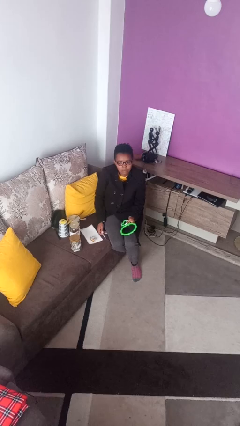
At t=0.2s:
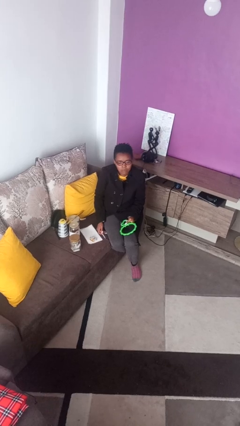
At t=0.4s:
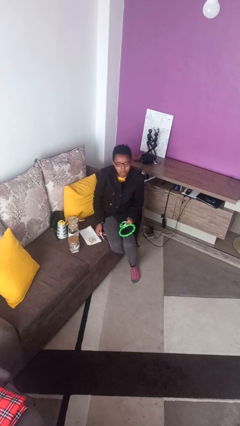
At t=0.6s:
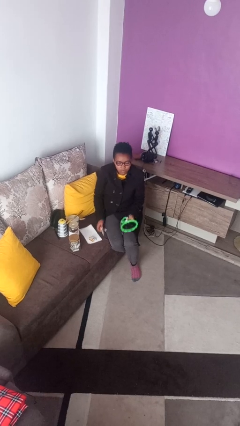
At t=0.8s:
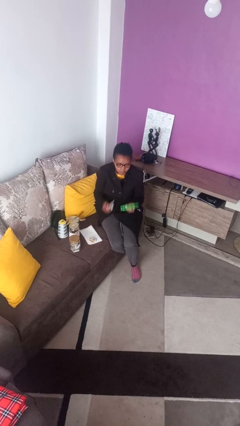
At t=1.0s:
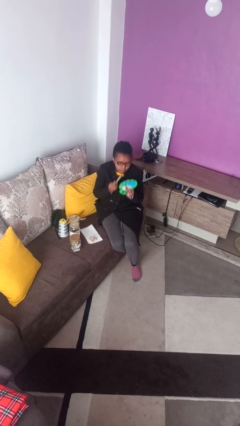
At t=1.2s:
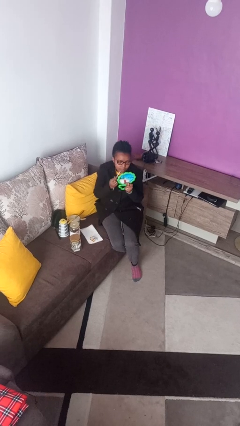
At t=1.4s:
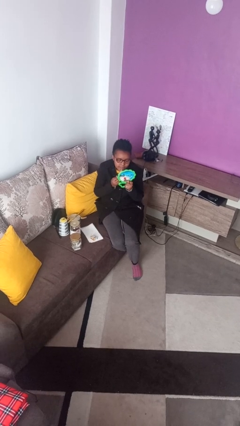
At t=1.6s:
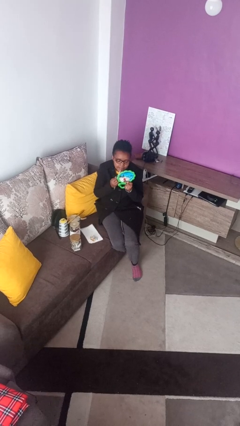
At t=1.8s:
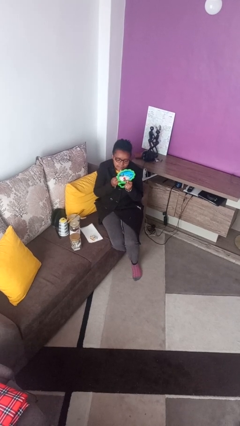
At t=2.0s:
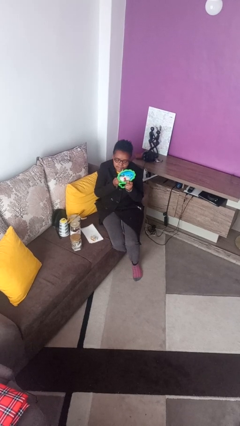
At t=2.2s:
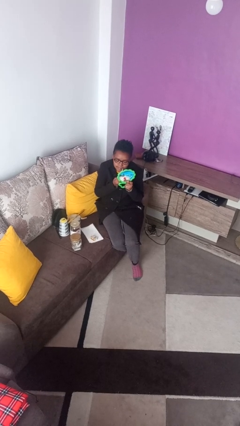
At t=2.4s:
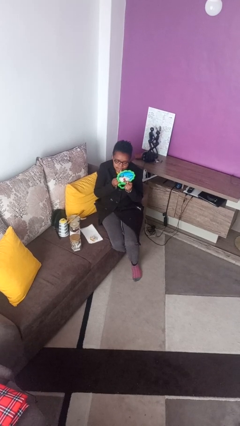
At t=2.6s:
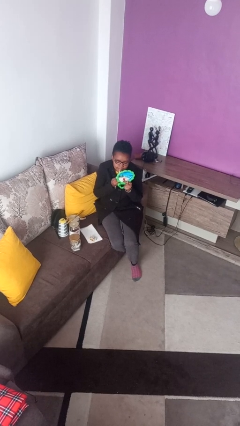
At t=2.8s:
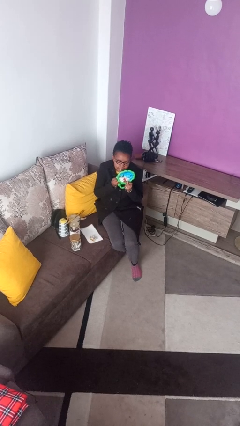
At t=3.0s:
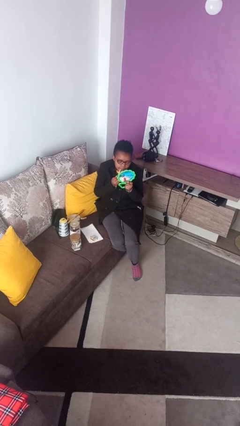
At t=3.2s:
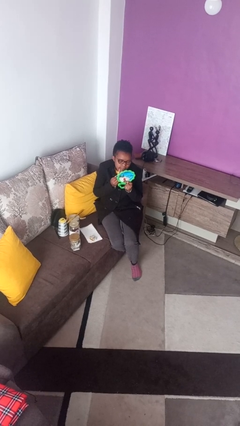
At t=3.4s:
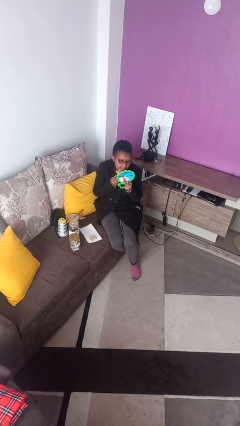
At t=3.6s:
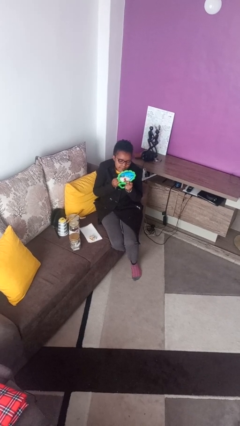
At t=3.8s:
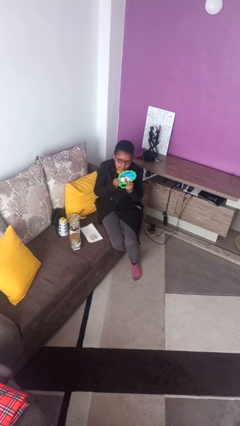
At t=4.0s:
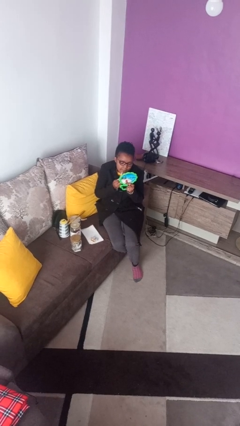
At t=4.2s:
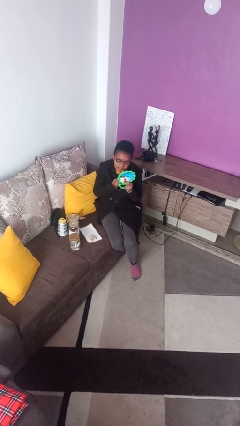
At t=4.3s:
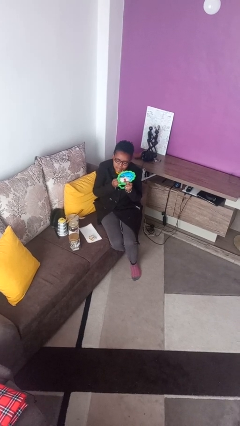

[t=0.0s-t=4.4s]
person applies lip makeup

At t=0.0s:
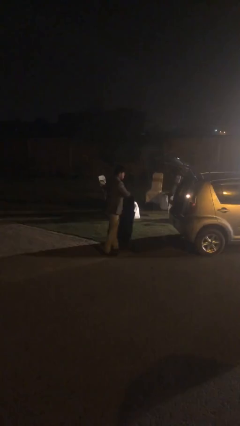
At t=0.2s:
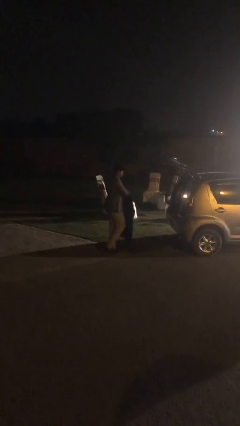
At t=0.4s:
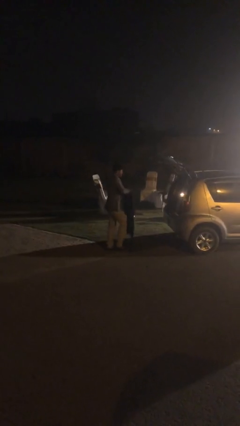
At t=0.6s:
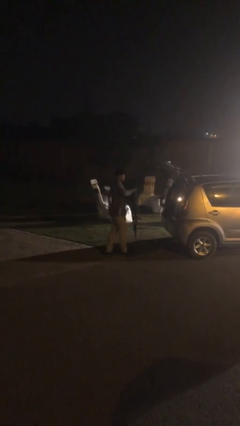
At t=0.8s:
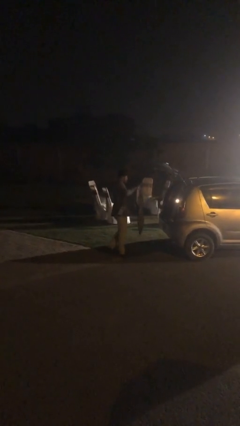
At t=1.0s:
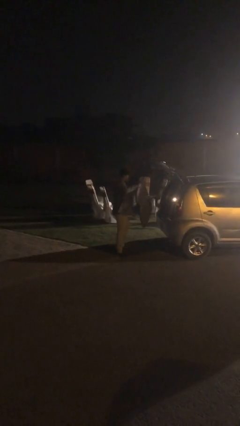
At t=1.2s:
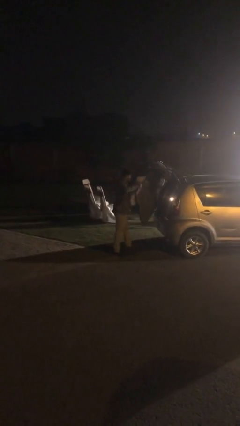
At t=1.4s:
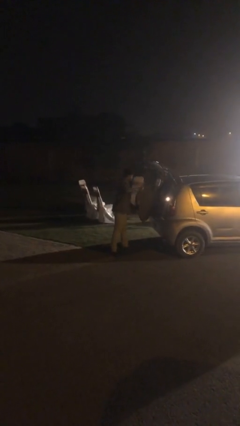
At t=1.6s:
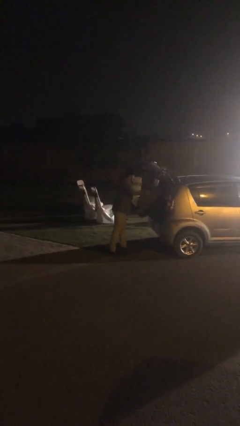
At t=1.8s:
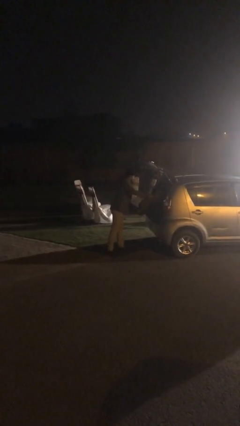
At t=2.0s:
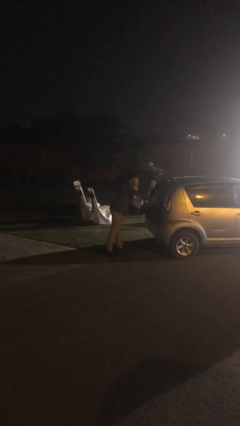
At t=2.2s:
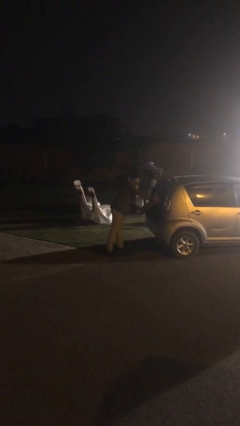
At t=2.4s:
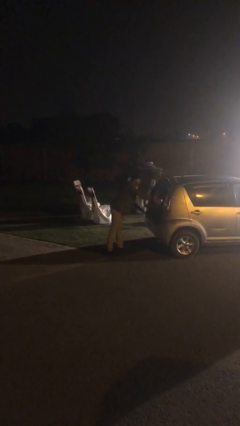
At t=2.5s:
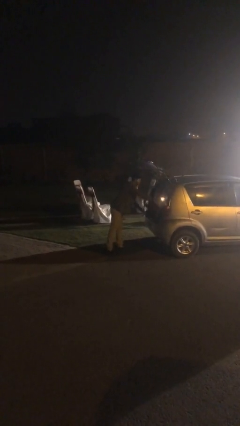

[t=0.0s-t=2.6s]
person loads car

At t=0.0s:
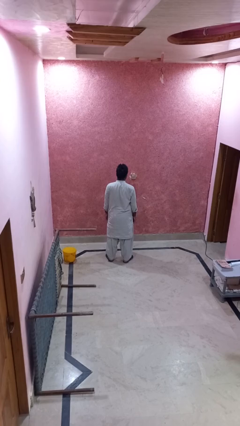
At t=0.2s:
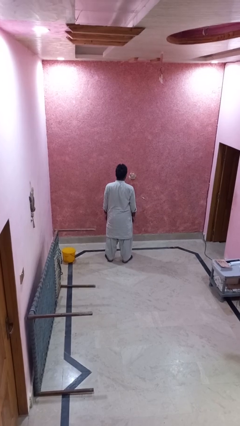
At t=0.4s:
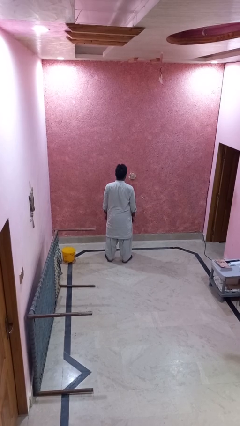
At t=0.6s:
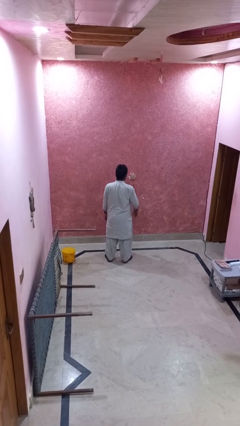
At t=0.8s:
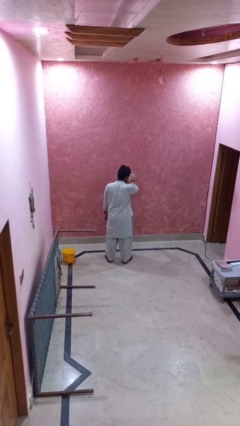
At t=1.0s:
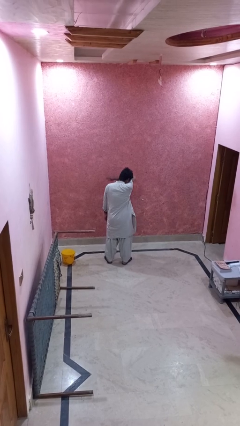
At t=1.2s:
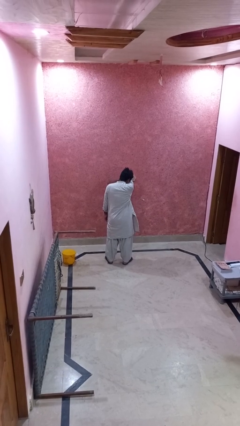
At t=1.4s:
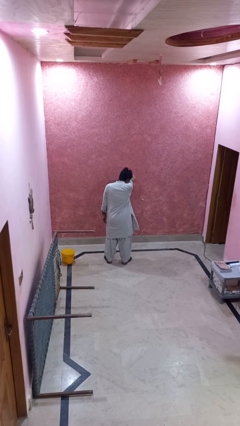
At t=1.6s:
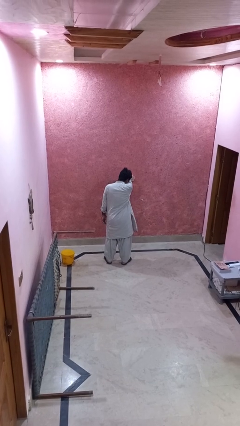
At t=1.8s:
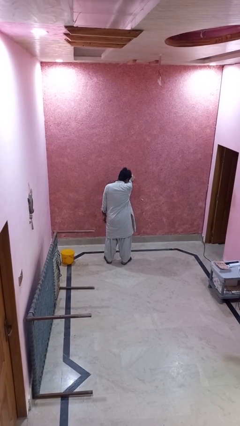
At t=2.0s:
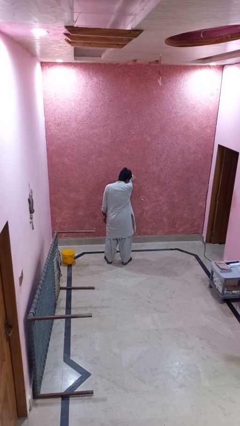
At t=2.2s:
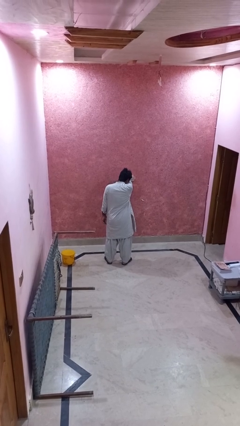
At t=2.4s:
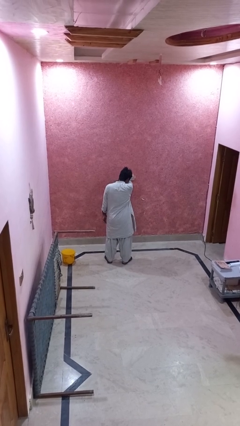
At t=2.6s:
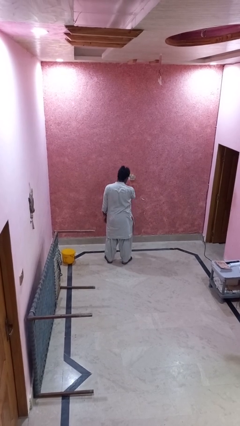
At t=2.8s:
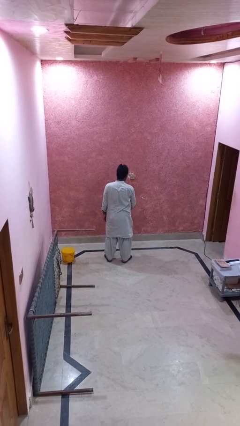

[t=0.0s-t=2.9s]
person sneezes into arm

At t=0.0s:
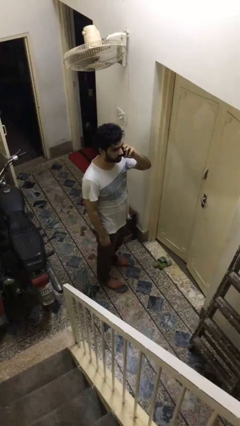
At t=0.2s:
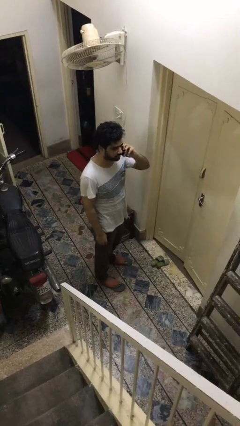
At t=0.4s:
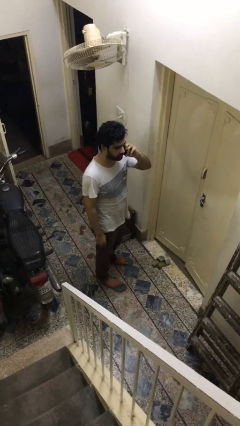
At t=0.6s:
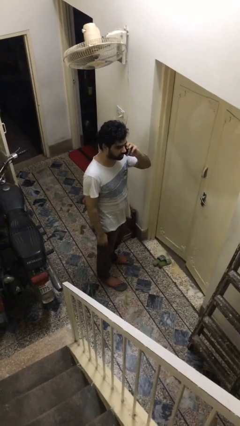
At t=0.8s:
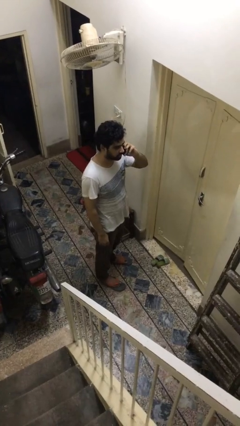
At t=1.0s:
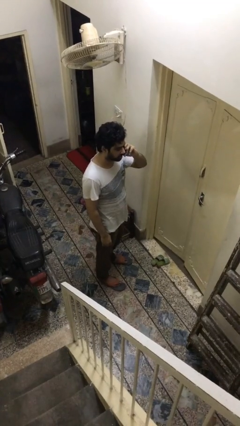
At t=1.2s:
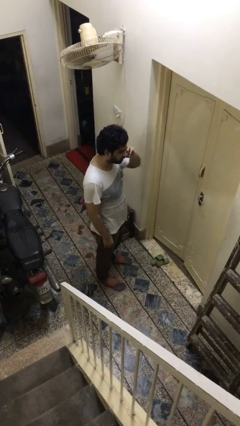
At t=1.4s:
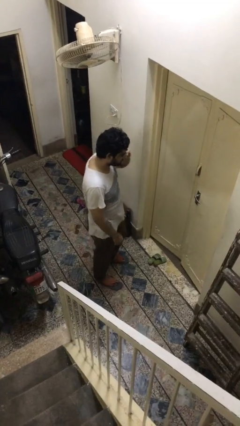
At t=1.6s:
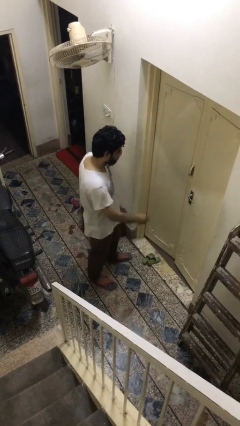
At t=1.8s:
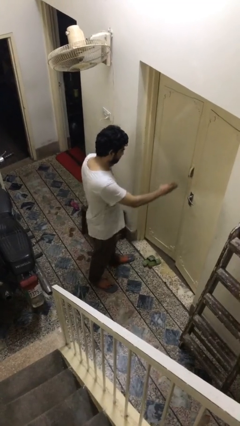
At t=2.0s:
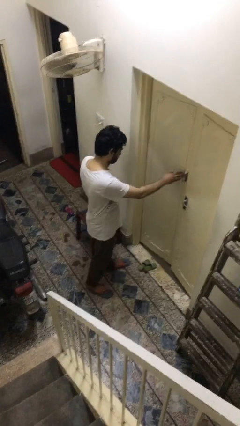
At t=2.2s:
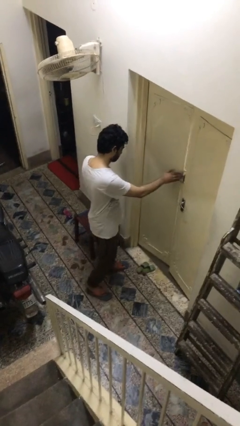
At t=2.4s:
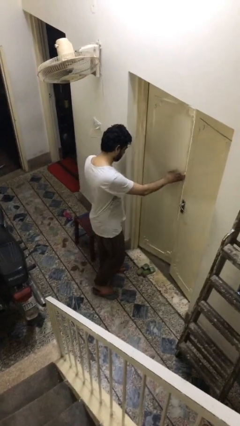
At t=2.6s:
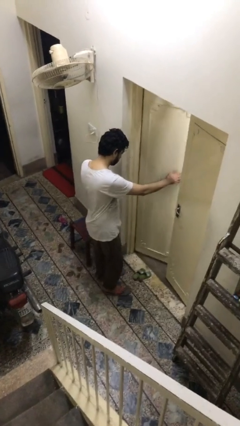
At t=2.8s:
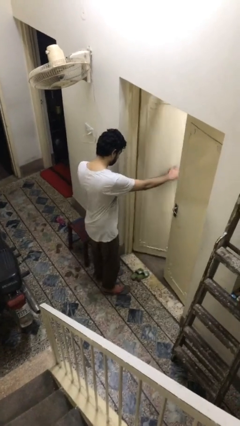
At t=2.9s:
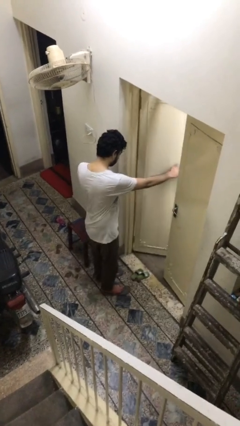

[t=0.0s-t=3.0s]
person opens facility door

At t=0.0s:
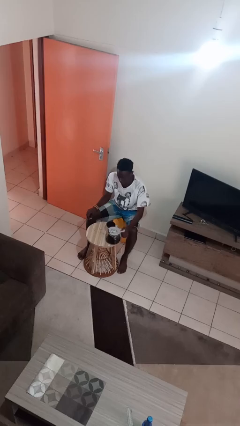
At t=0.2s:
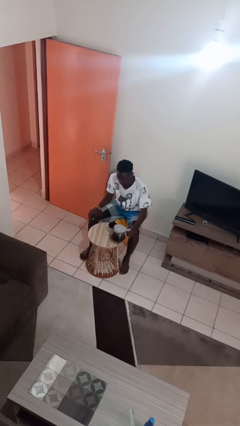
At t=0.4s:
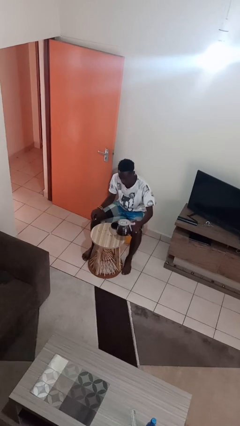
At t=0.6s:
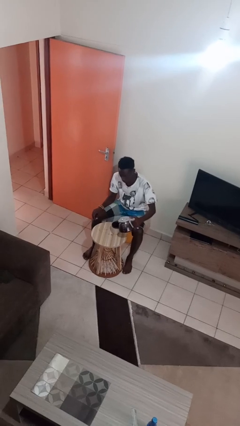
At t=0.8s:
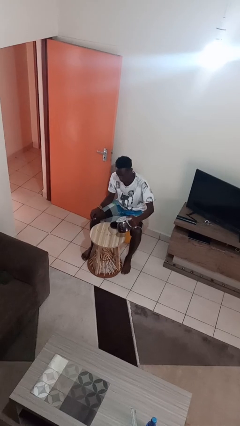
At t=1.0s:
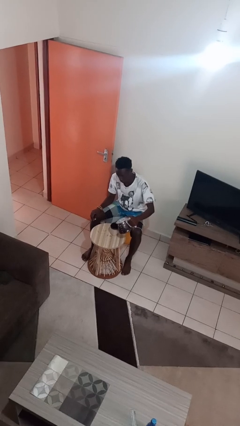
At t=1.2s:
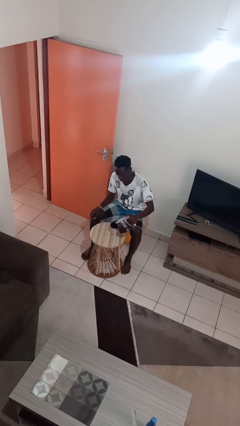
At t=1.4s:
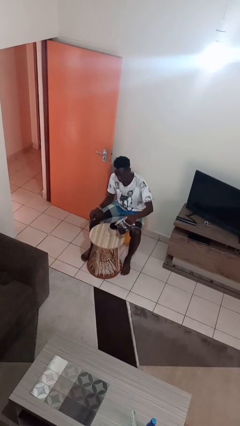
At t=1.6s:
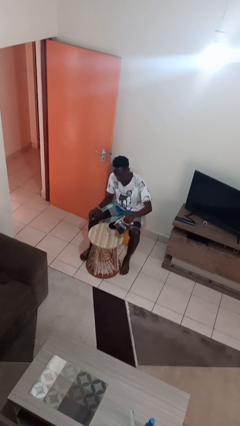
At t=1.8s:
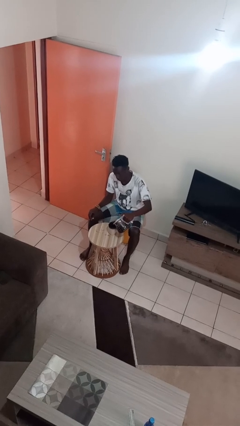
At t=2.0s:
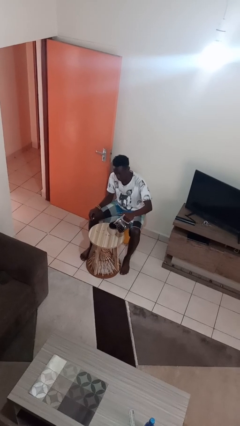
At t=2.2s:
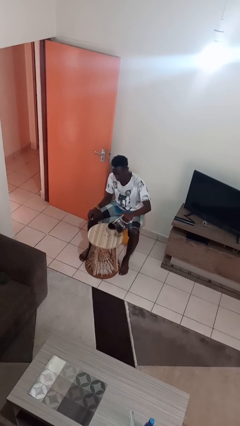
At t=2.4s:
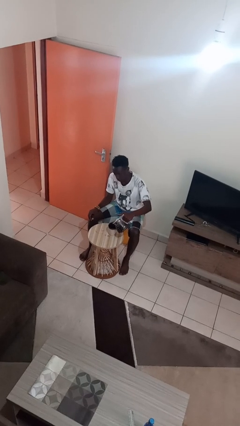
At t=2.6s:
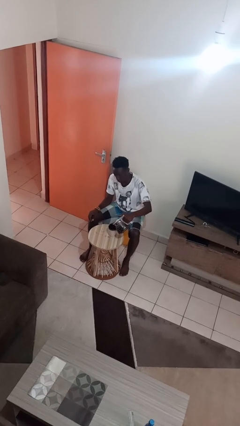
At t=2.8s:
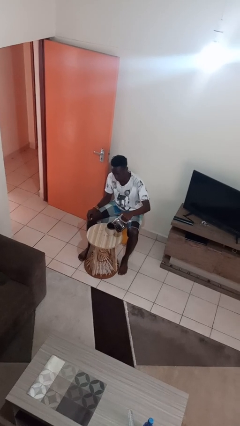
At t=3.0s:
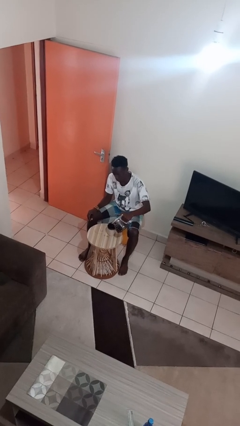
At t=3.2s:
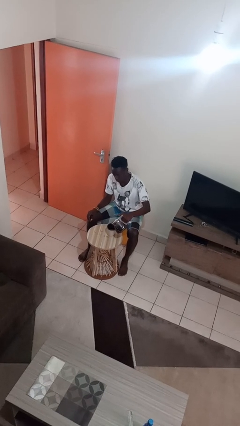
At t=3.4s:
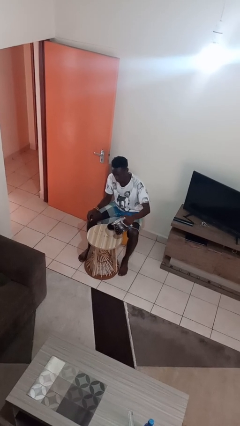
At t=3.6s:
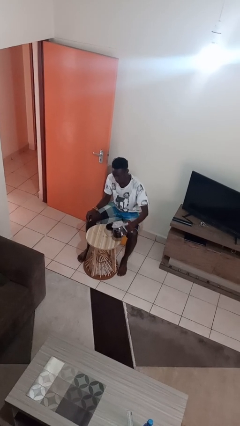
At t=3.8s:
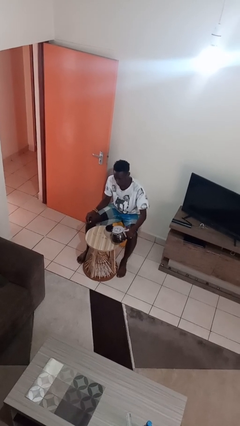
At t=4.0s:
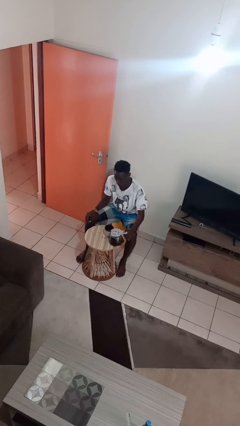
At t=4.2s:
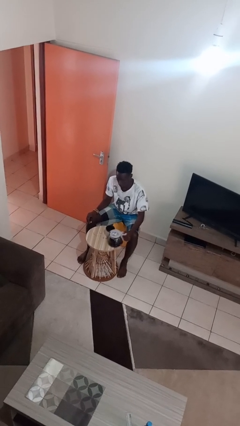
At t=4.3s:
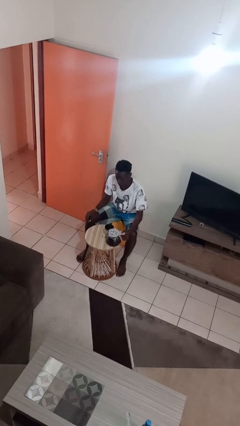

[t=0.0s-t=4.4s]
person pours coffee into mug

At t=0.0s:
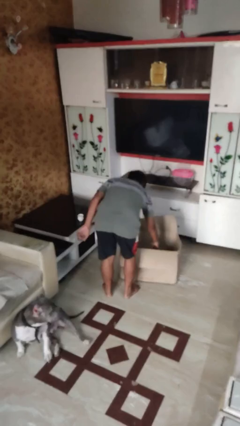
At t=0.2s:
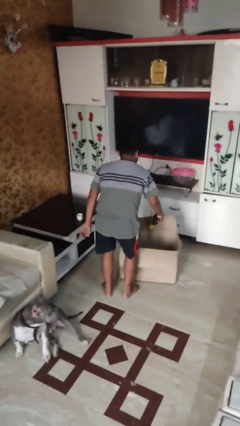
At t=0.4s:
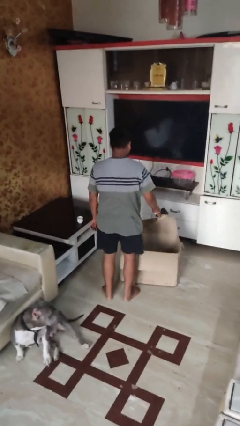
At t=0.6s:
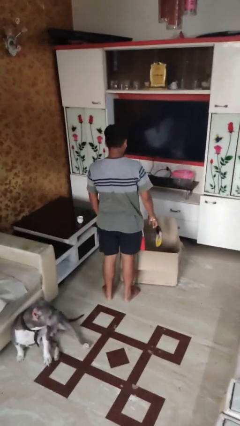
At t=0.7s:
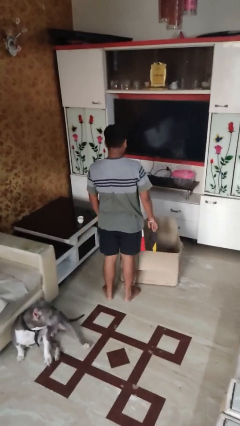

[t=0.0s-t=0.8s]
person takes object from box
